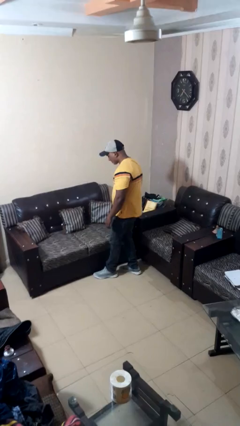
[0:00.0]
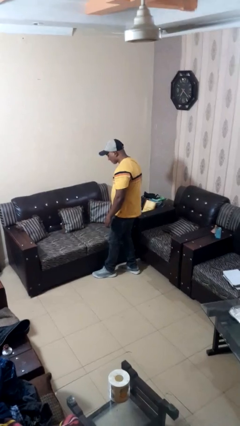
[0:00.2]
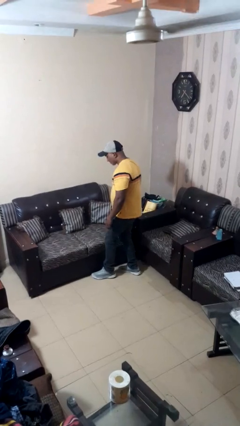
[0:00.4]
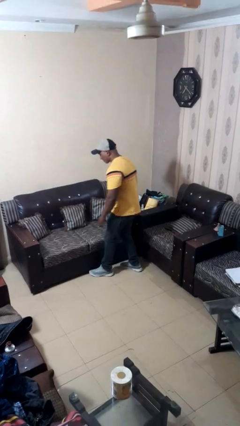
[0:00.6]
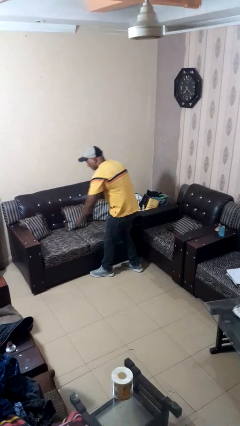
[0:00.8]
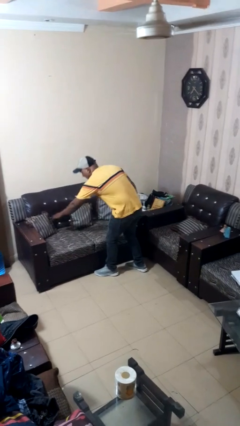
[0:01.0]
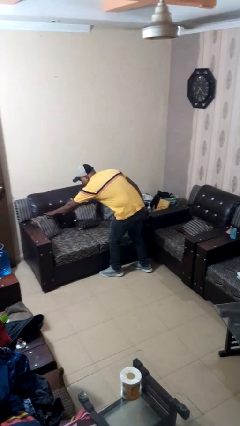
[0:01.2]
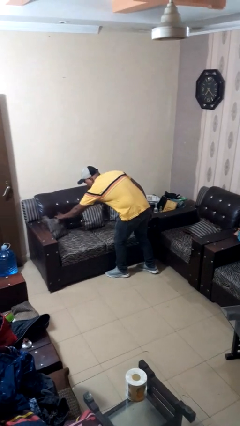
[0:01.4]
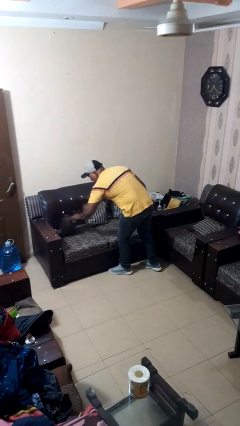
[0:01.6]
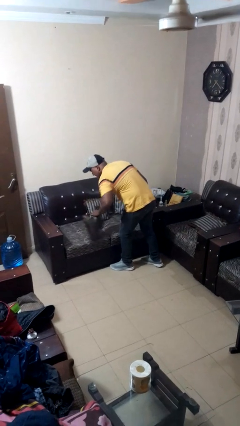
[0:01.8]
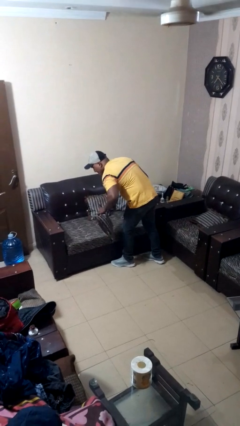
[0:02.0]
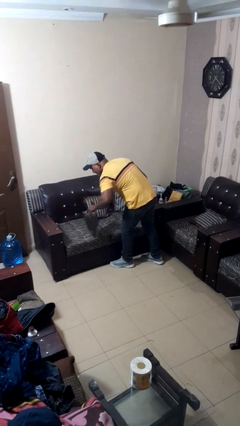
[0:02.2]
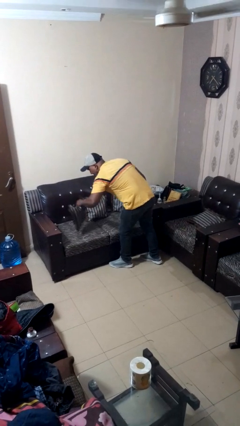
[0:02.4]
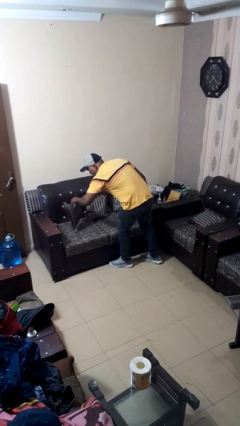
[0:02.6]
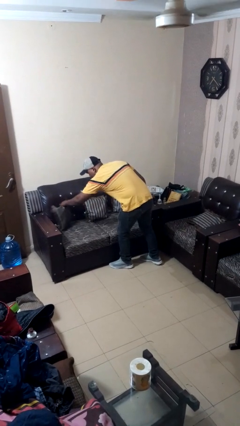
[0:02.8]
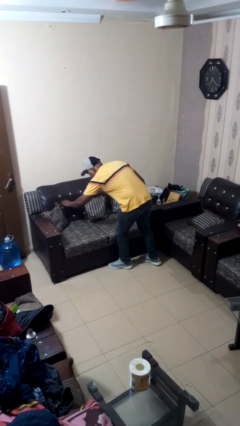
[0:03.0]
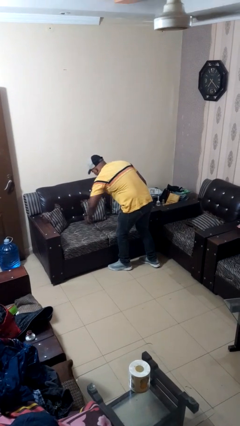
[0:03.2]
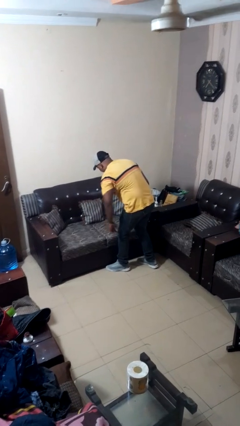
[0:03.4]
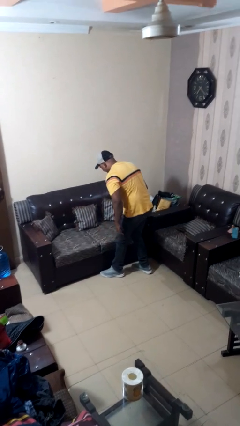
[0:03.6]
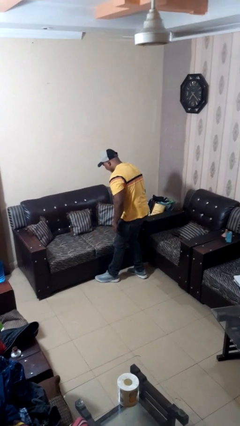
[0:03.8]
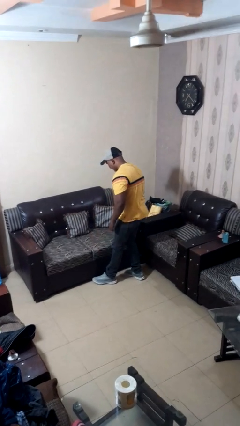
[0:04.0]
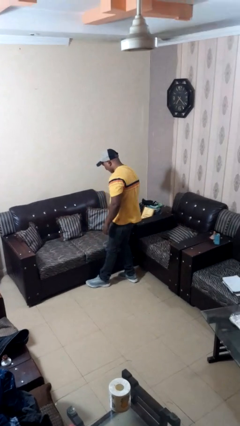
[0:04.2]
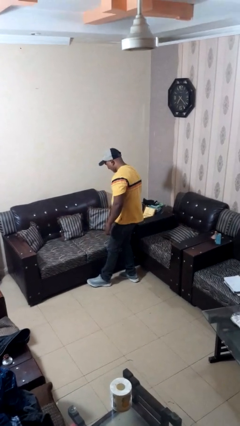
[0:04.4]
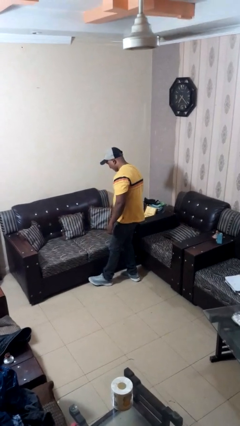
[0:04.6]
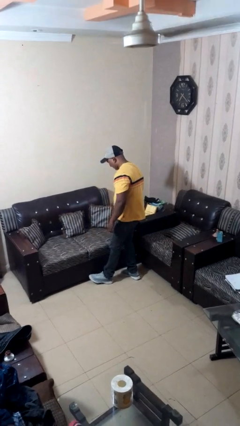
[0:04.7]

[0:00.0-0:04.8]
person searches in couch

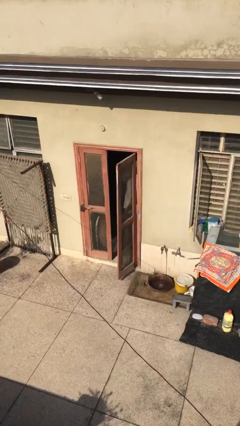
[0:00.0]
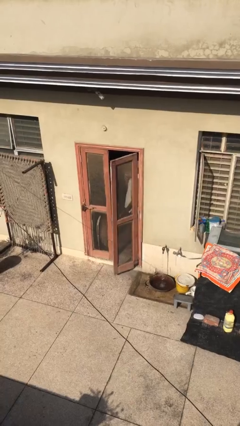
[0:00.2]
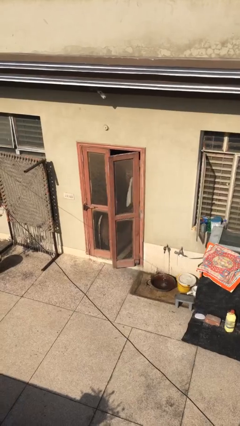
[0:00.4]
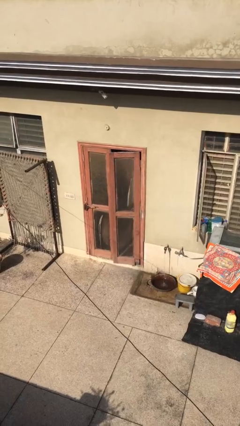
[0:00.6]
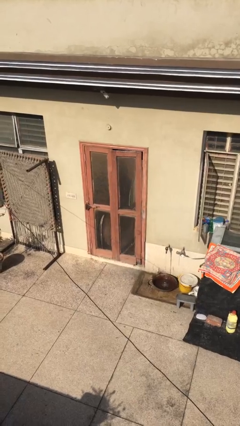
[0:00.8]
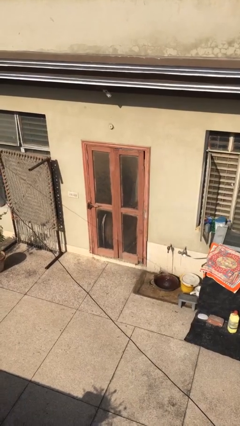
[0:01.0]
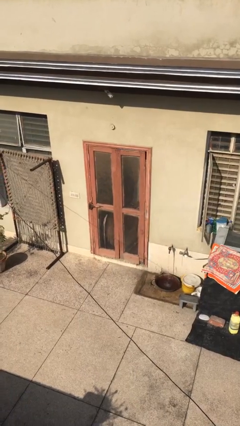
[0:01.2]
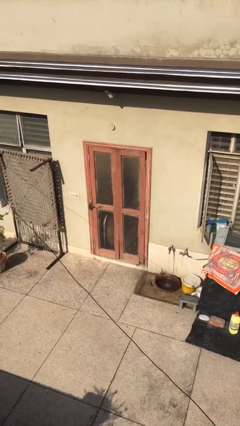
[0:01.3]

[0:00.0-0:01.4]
person closes facility door

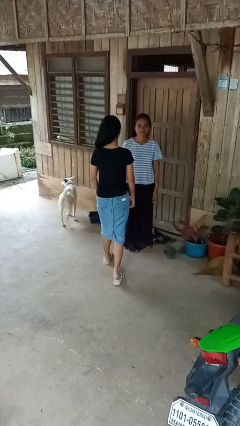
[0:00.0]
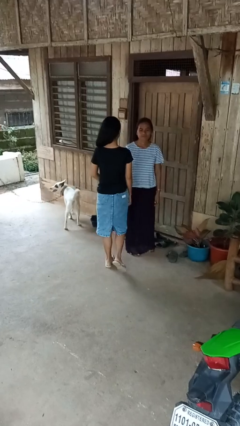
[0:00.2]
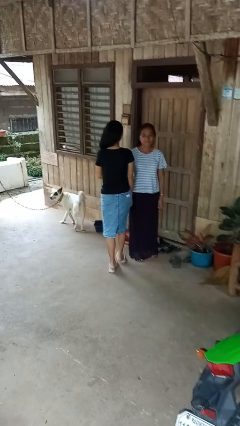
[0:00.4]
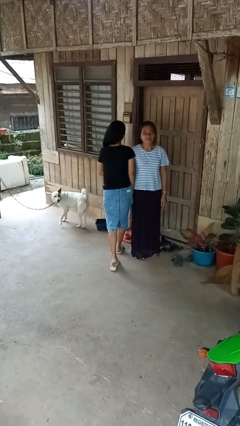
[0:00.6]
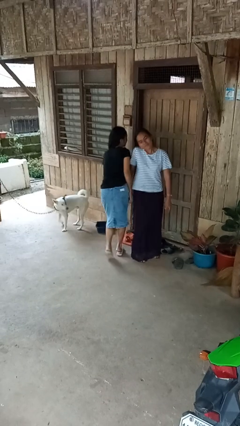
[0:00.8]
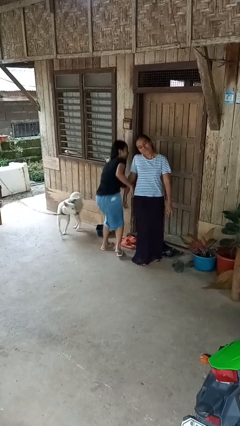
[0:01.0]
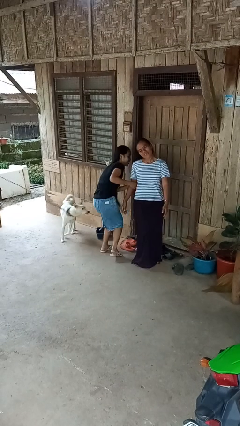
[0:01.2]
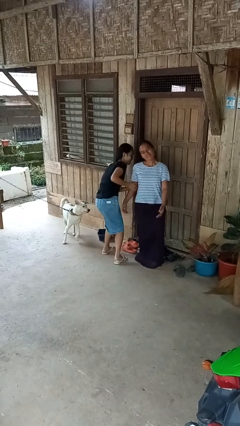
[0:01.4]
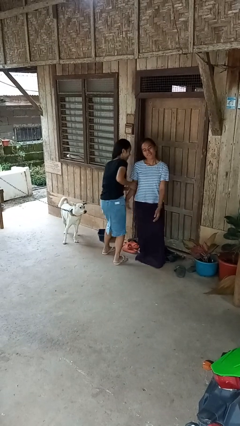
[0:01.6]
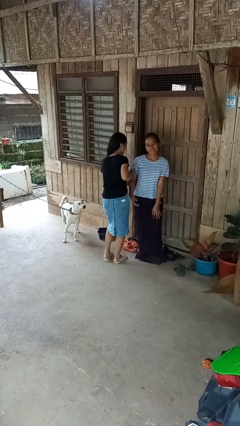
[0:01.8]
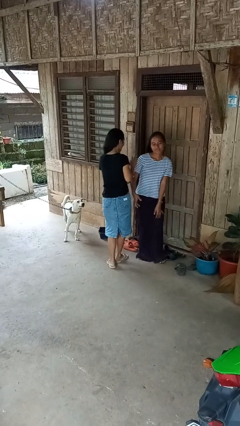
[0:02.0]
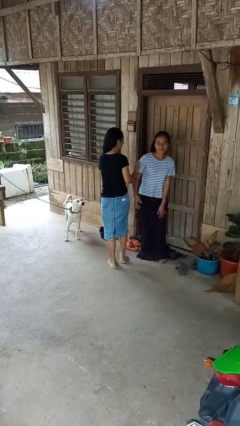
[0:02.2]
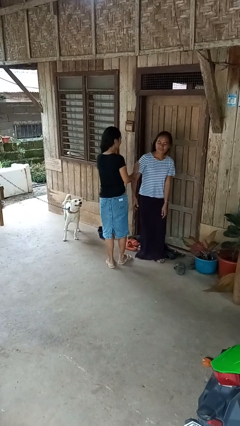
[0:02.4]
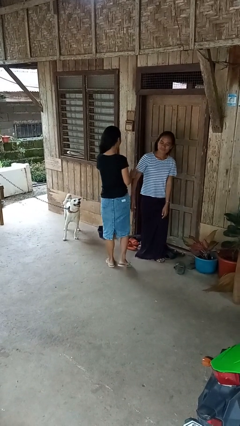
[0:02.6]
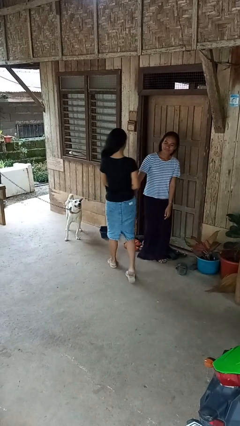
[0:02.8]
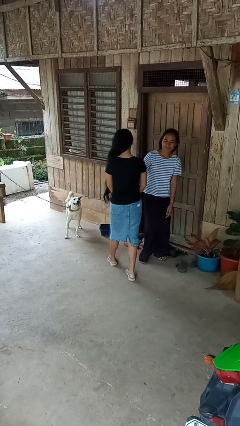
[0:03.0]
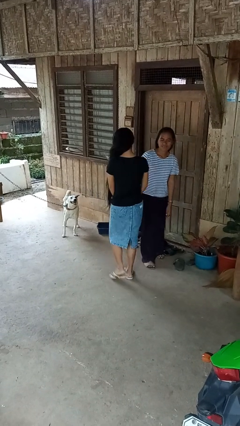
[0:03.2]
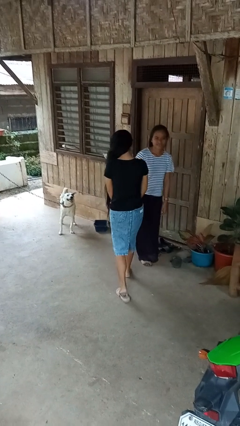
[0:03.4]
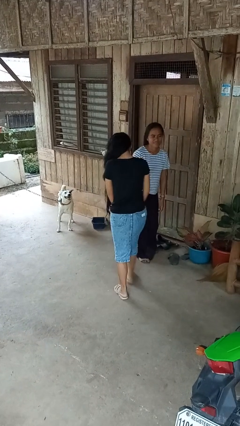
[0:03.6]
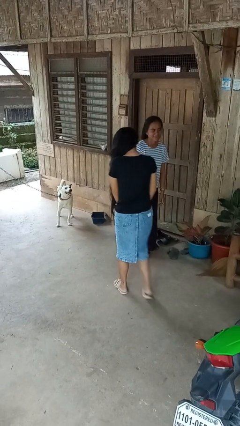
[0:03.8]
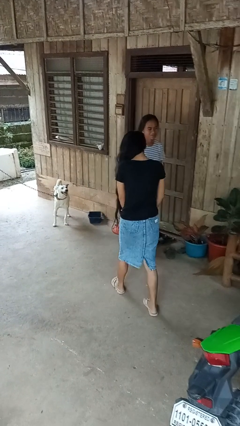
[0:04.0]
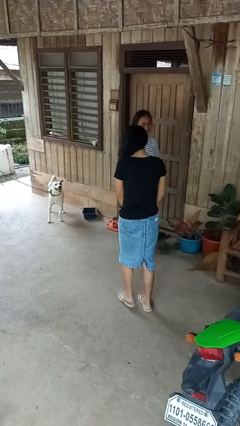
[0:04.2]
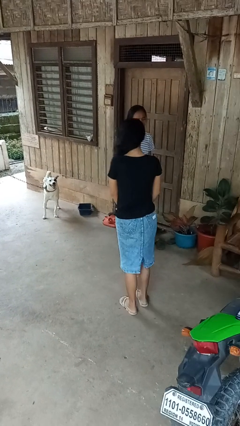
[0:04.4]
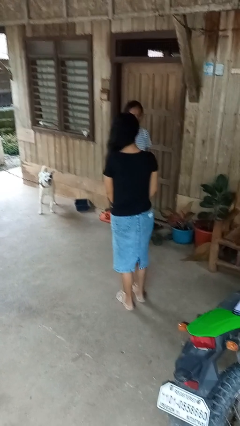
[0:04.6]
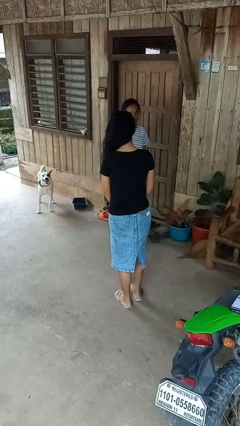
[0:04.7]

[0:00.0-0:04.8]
person bumps into person

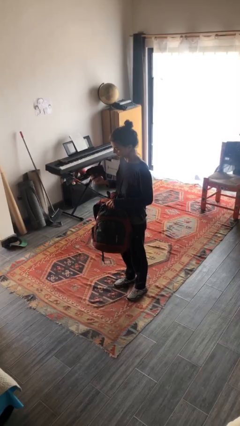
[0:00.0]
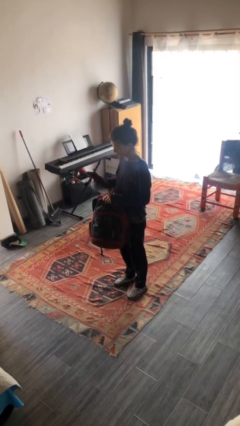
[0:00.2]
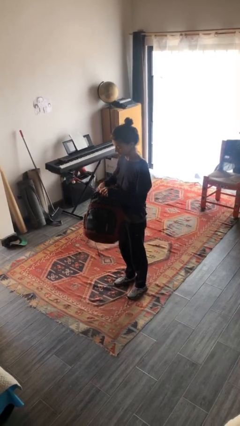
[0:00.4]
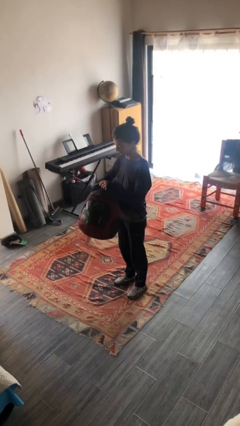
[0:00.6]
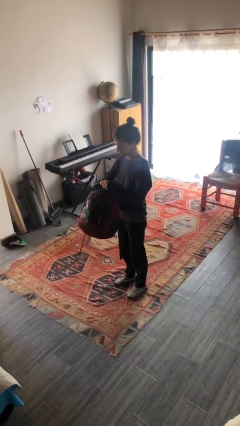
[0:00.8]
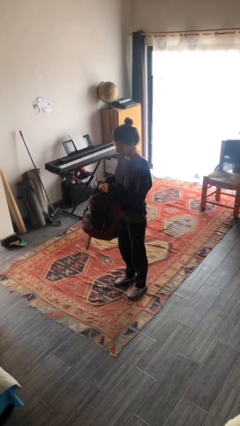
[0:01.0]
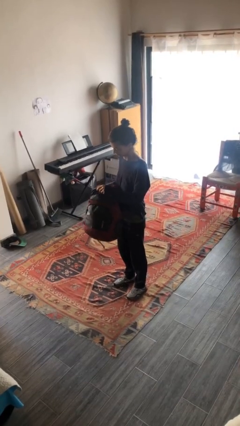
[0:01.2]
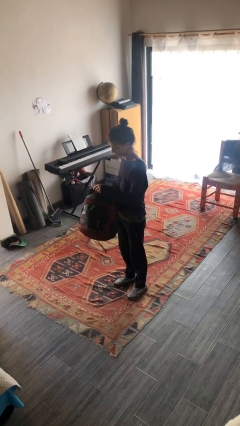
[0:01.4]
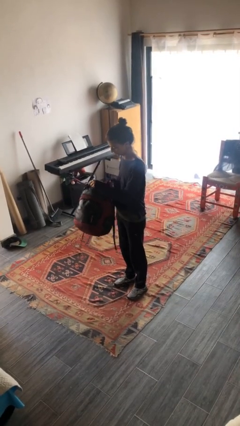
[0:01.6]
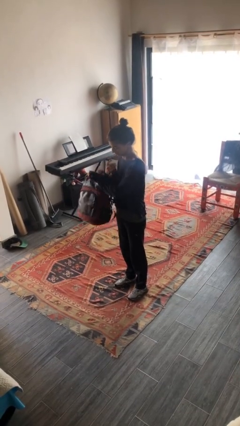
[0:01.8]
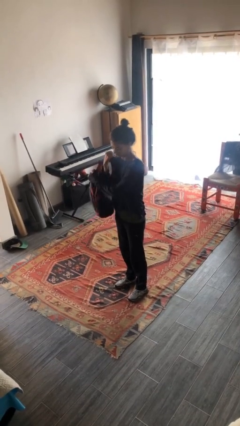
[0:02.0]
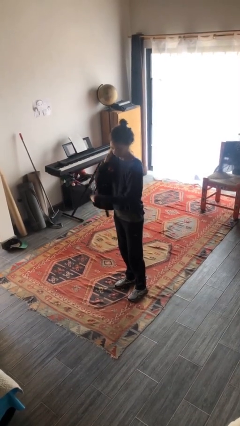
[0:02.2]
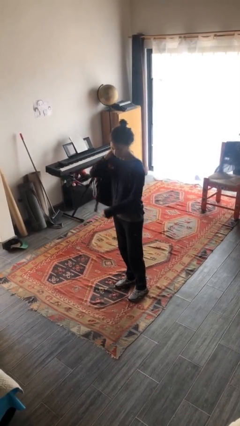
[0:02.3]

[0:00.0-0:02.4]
person puts object into backpack

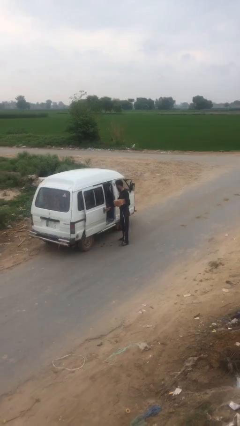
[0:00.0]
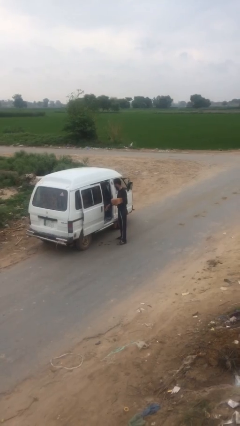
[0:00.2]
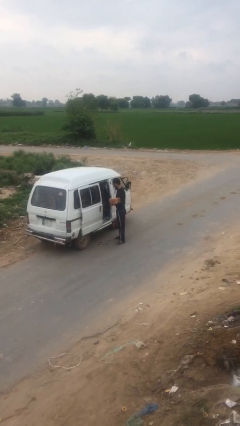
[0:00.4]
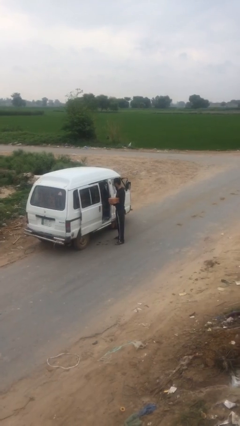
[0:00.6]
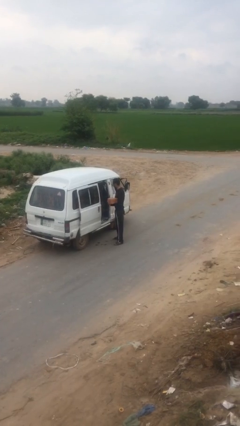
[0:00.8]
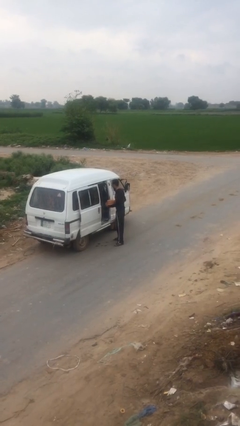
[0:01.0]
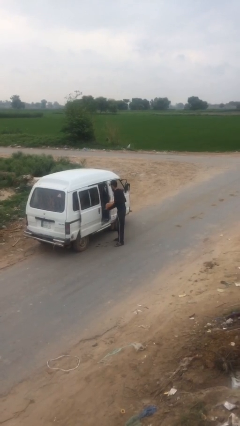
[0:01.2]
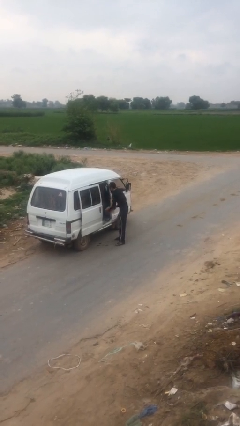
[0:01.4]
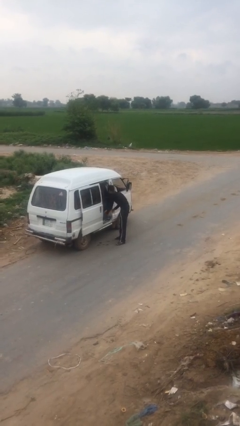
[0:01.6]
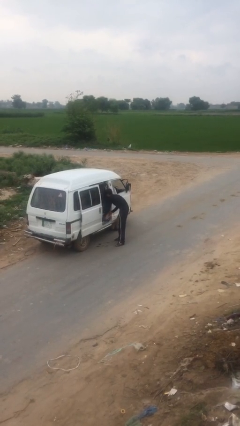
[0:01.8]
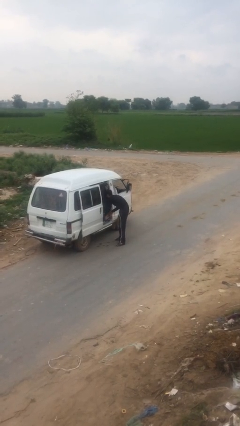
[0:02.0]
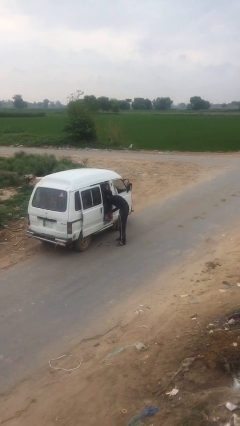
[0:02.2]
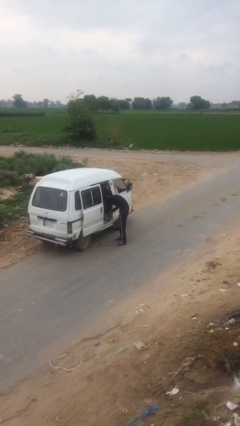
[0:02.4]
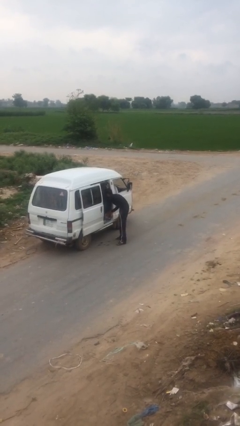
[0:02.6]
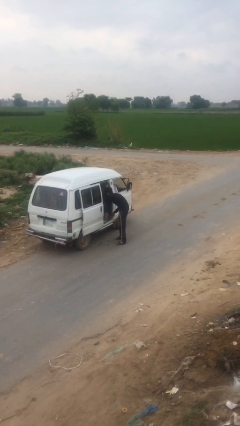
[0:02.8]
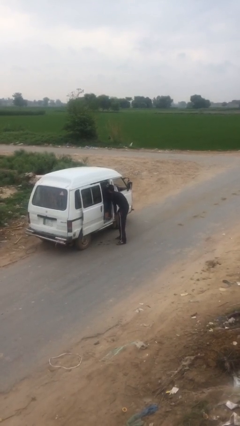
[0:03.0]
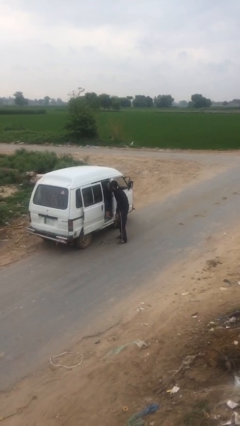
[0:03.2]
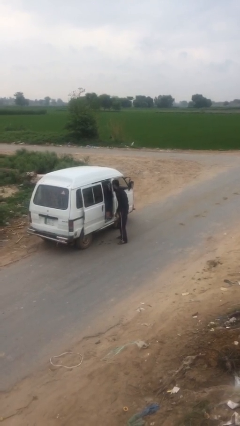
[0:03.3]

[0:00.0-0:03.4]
person loads car

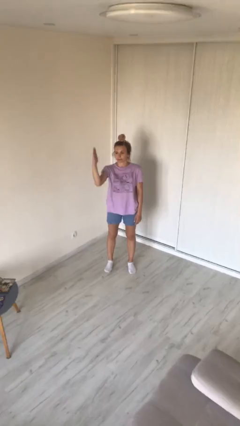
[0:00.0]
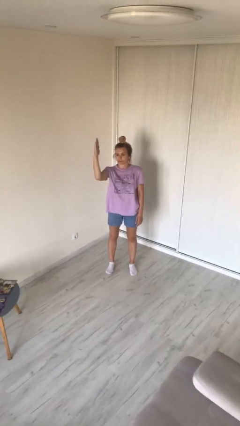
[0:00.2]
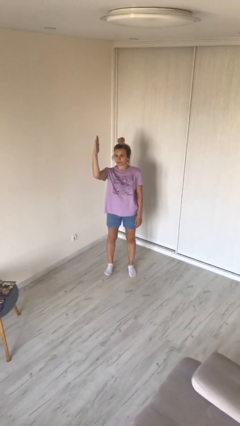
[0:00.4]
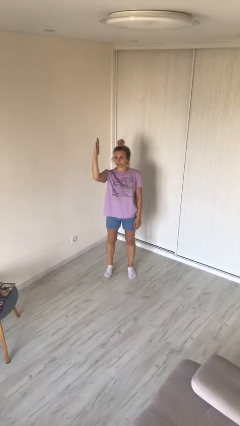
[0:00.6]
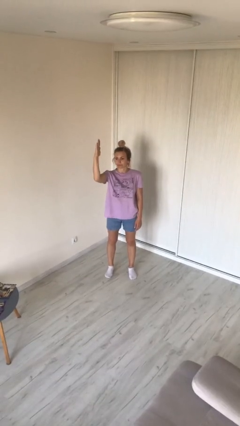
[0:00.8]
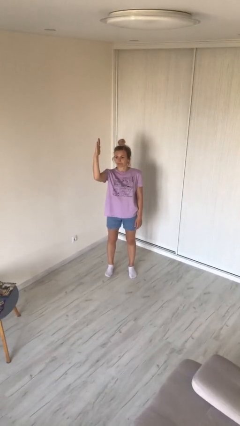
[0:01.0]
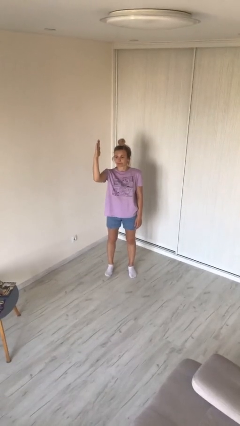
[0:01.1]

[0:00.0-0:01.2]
person gestures raise hand
